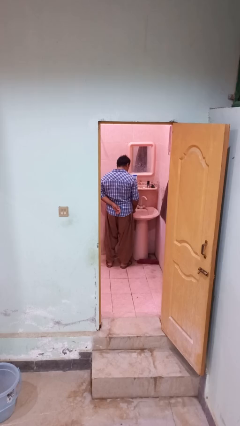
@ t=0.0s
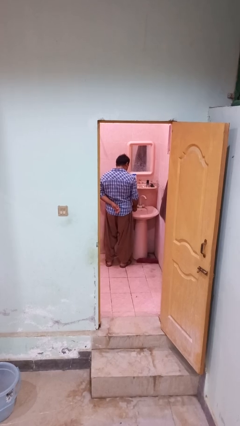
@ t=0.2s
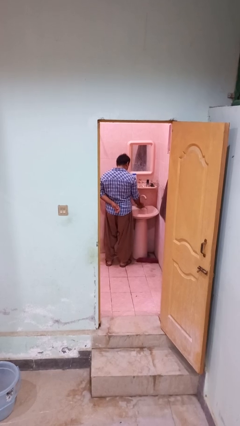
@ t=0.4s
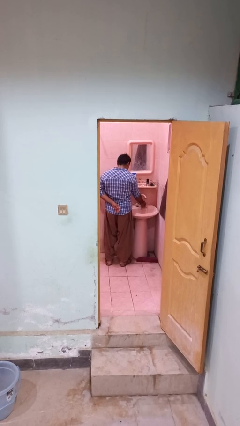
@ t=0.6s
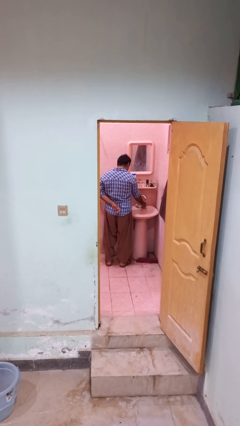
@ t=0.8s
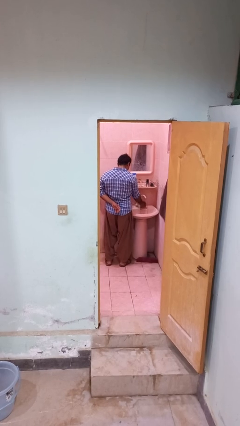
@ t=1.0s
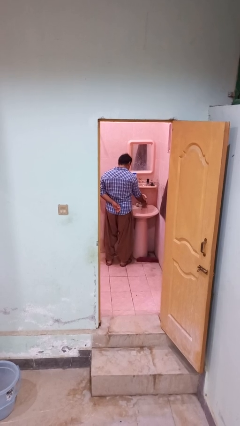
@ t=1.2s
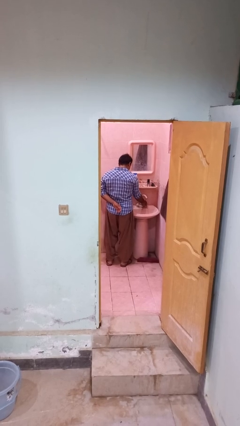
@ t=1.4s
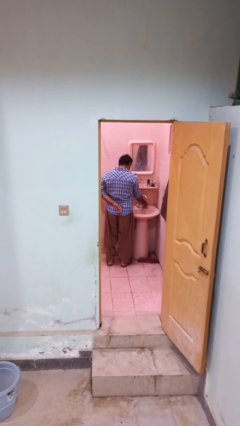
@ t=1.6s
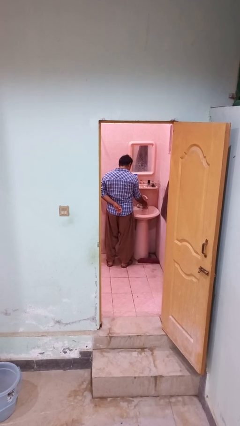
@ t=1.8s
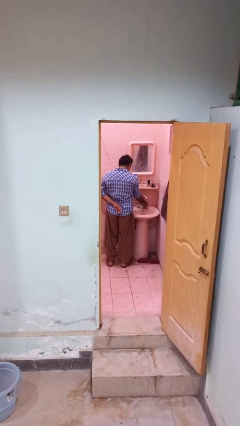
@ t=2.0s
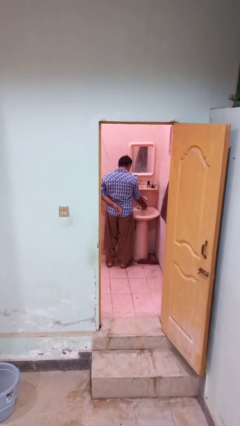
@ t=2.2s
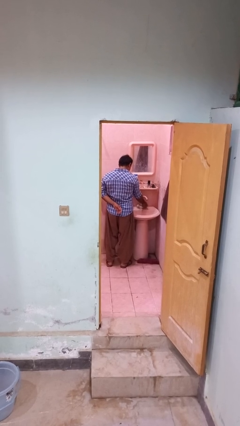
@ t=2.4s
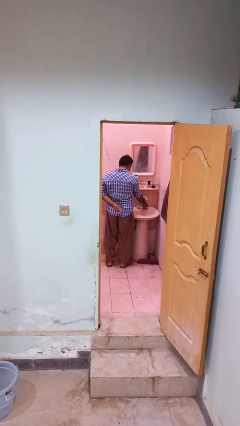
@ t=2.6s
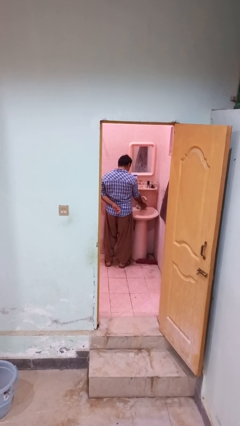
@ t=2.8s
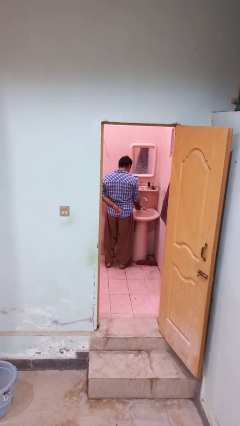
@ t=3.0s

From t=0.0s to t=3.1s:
person turns off faucet

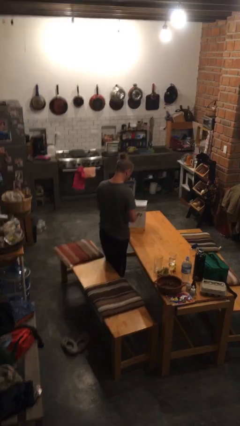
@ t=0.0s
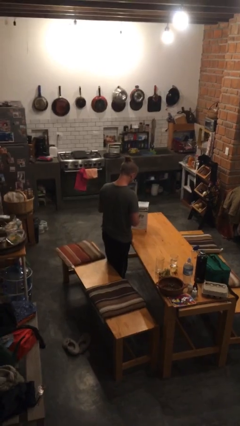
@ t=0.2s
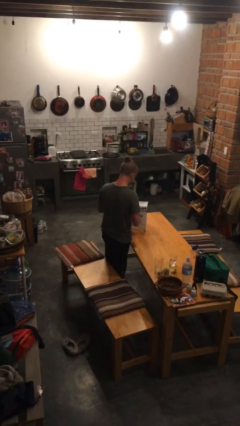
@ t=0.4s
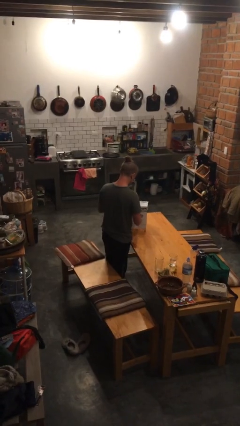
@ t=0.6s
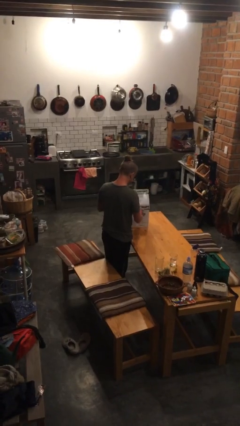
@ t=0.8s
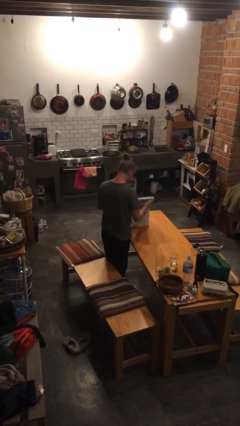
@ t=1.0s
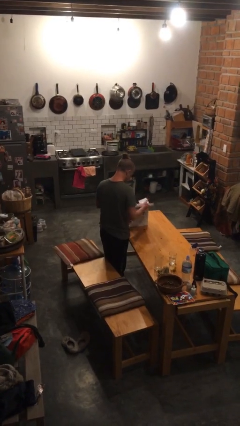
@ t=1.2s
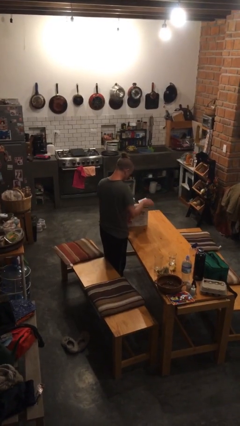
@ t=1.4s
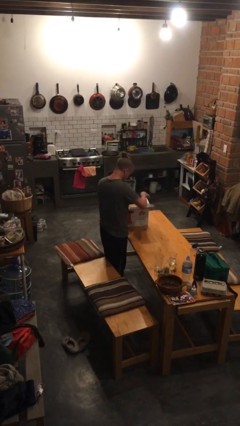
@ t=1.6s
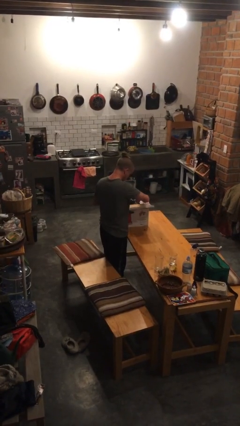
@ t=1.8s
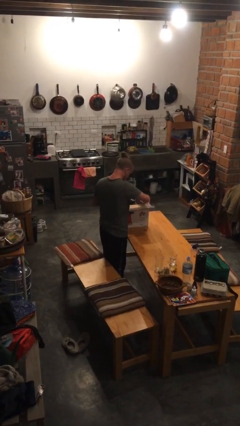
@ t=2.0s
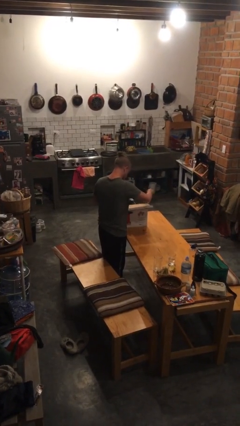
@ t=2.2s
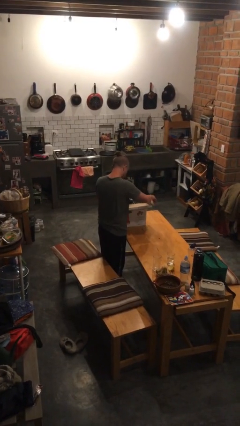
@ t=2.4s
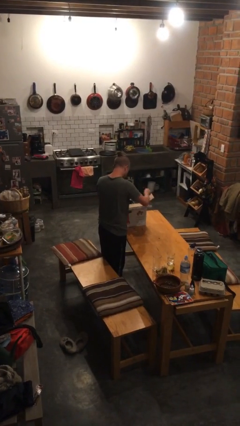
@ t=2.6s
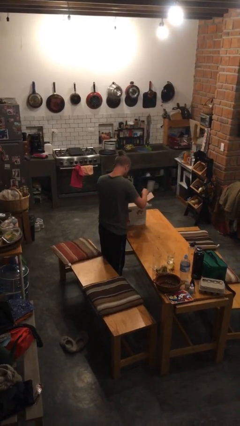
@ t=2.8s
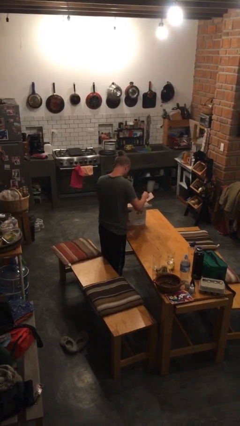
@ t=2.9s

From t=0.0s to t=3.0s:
person opens box

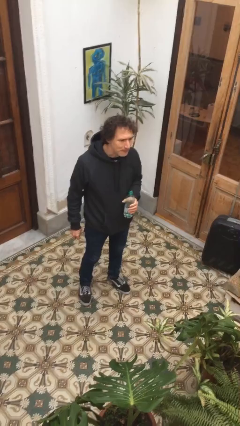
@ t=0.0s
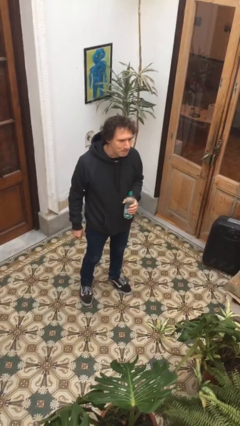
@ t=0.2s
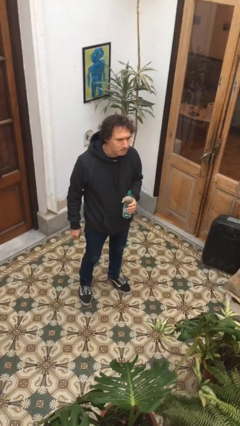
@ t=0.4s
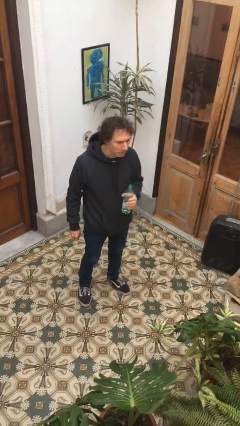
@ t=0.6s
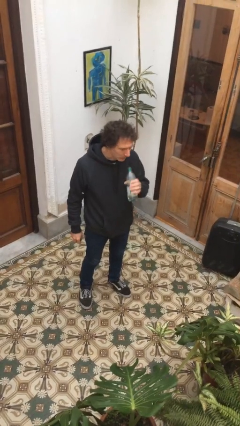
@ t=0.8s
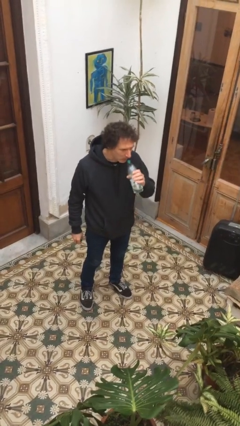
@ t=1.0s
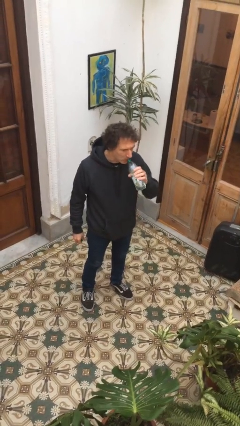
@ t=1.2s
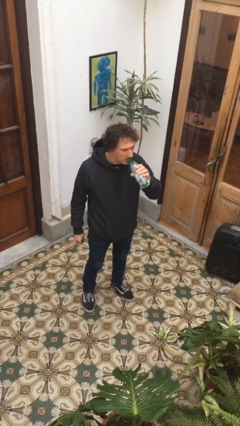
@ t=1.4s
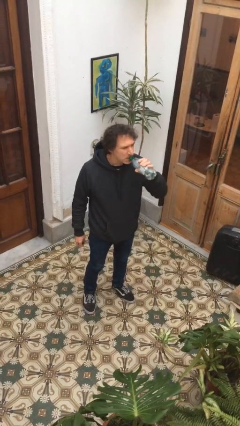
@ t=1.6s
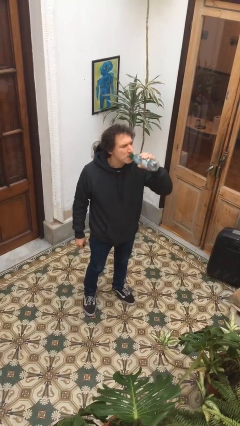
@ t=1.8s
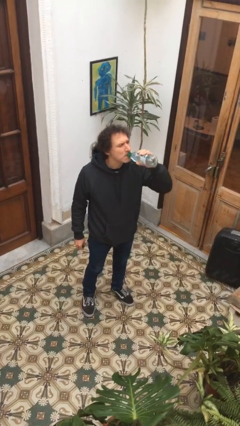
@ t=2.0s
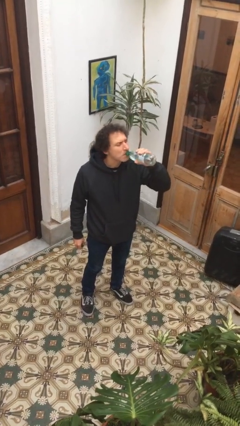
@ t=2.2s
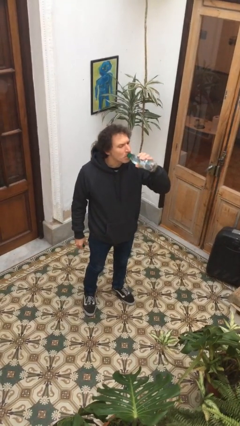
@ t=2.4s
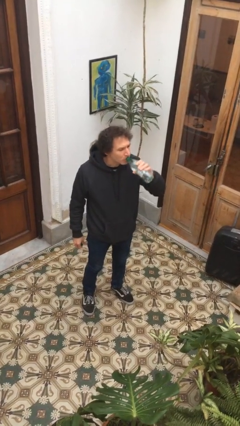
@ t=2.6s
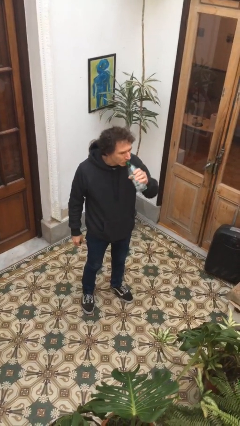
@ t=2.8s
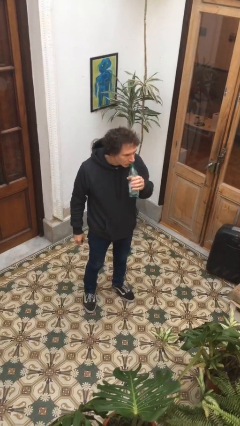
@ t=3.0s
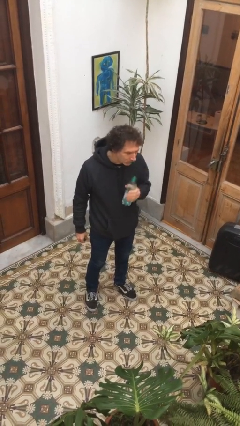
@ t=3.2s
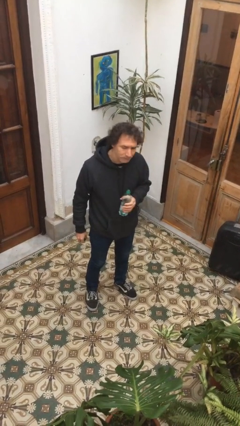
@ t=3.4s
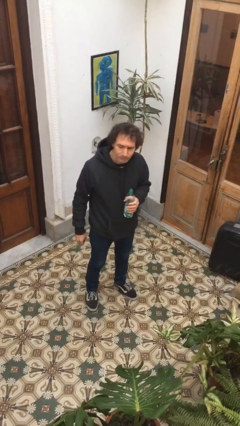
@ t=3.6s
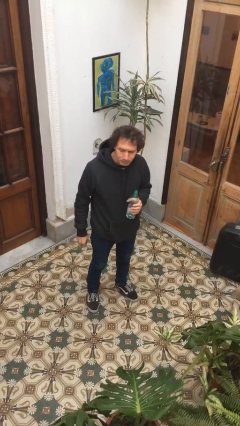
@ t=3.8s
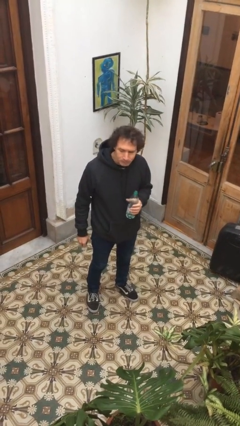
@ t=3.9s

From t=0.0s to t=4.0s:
person drinks from bottle

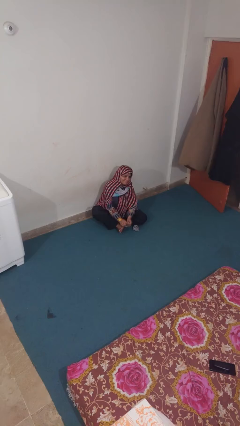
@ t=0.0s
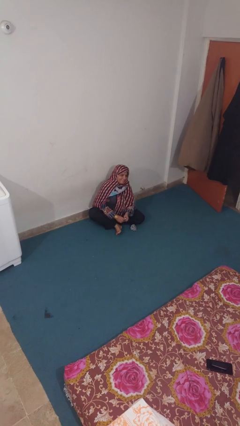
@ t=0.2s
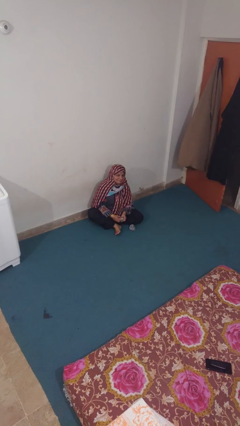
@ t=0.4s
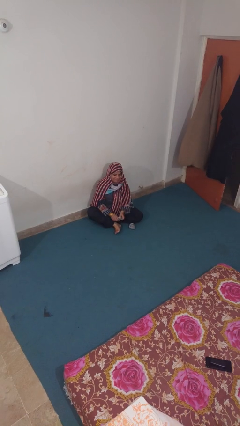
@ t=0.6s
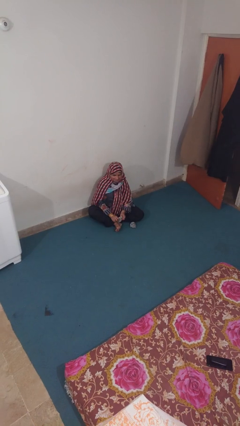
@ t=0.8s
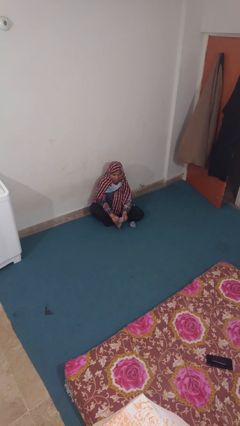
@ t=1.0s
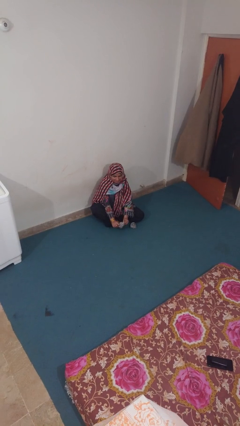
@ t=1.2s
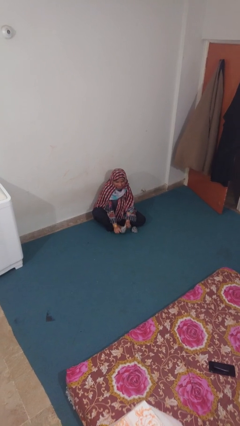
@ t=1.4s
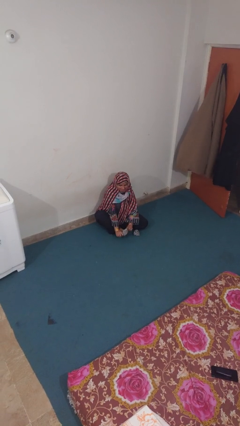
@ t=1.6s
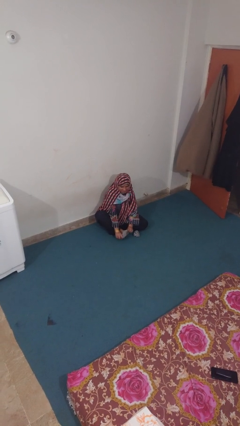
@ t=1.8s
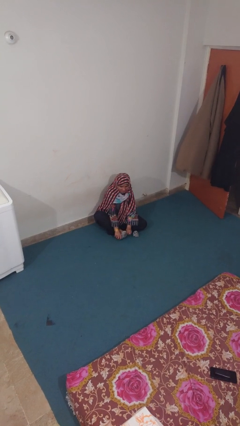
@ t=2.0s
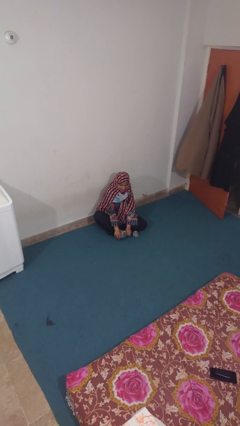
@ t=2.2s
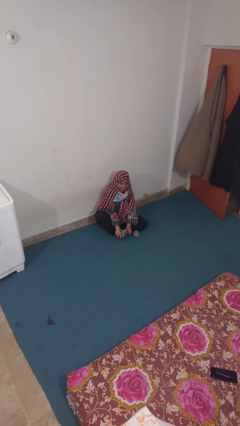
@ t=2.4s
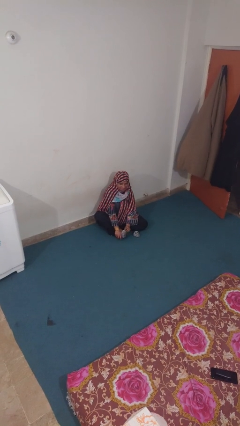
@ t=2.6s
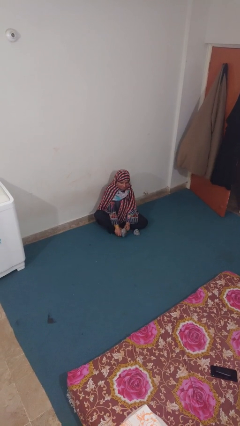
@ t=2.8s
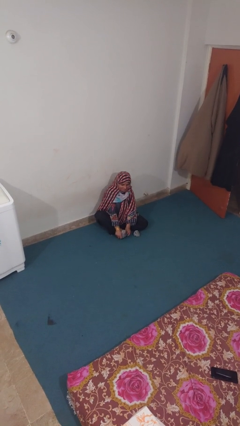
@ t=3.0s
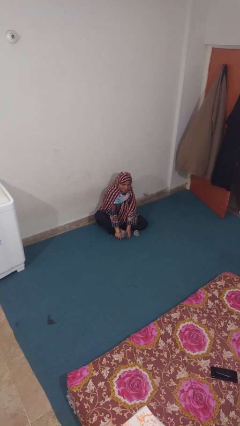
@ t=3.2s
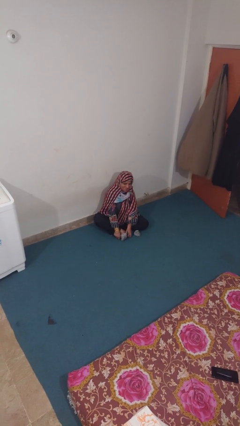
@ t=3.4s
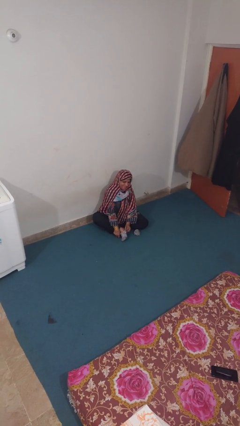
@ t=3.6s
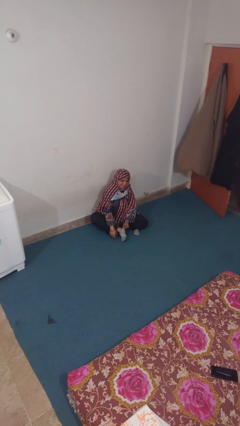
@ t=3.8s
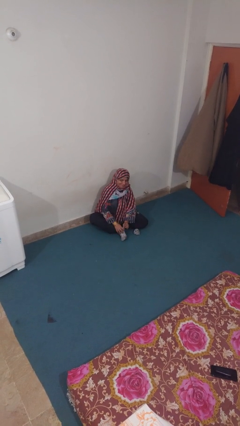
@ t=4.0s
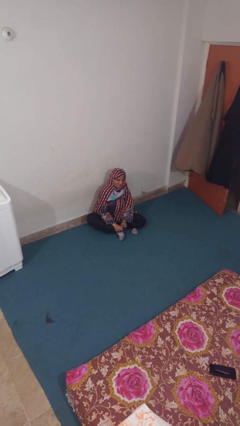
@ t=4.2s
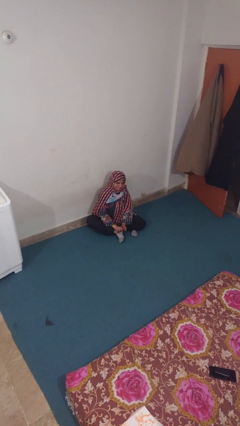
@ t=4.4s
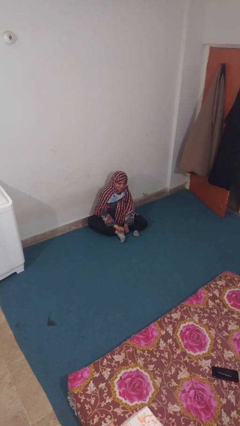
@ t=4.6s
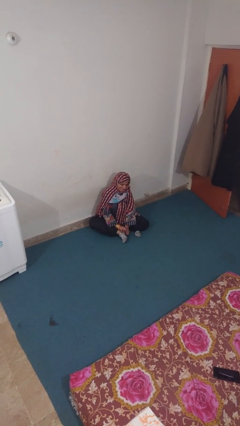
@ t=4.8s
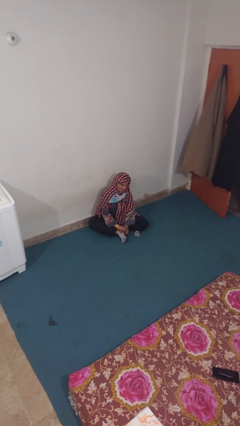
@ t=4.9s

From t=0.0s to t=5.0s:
person puts on socks

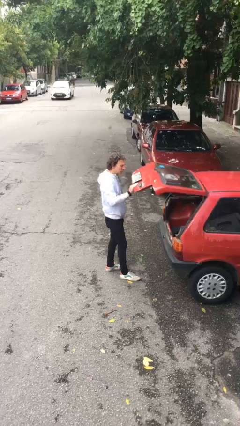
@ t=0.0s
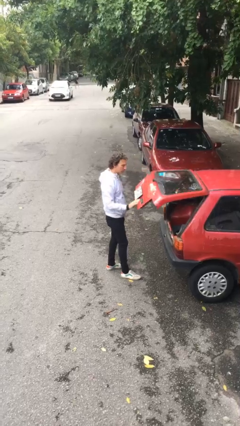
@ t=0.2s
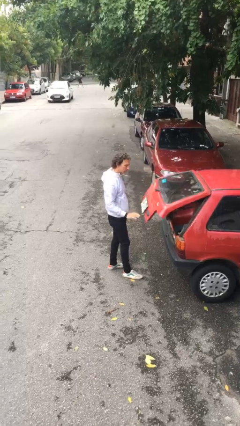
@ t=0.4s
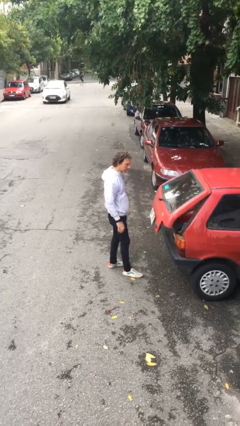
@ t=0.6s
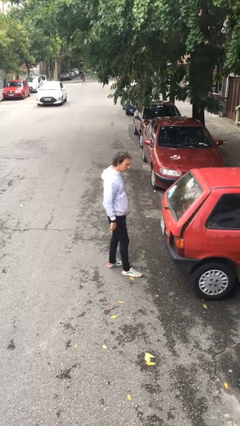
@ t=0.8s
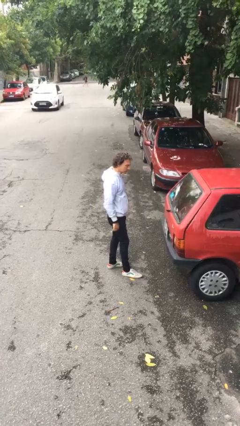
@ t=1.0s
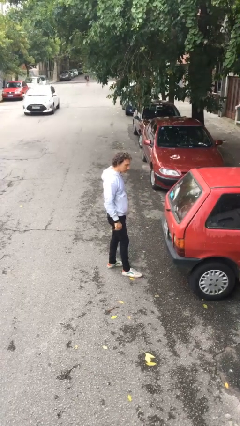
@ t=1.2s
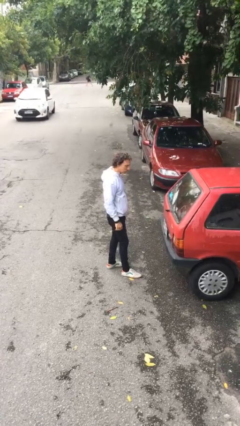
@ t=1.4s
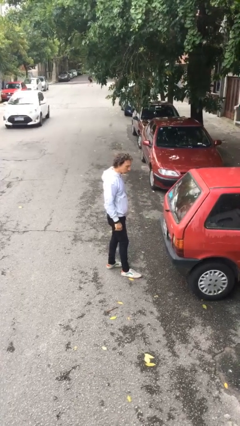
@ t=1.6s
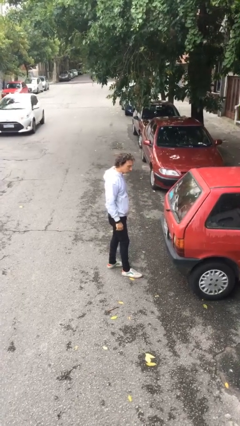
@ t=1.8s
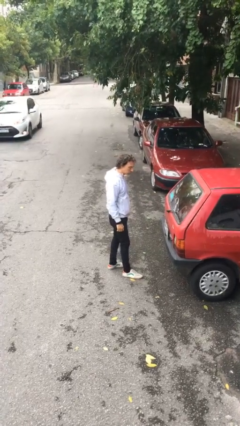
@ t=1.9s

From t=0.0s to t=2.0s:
person closes car trunk

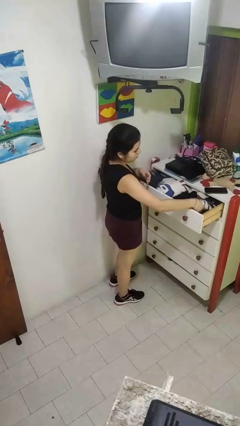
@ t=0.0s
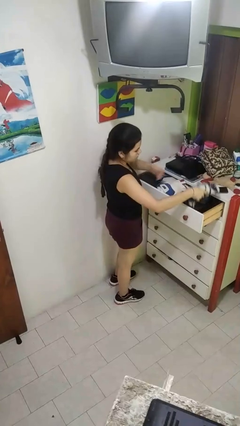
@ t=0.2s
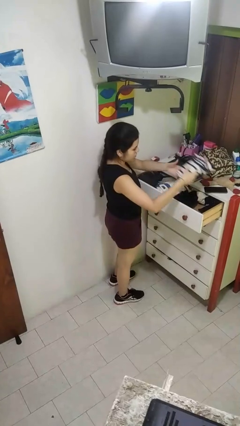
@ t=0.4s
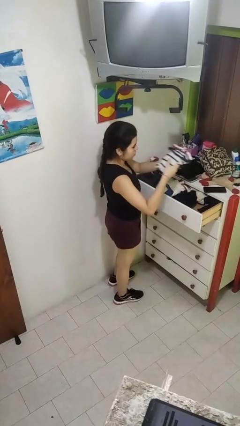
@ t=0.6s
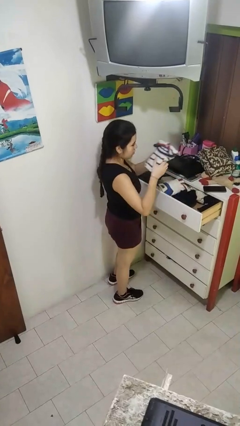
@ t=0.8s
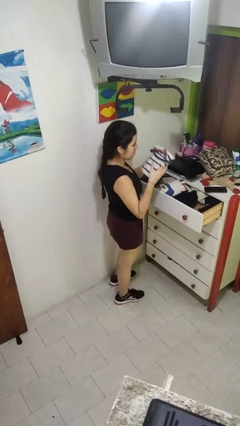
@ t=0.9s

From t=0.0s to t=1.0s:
person takes clothes from dresser
